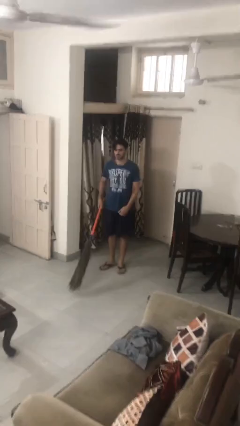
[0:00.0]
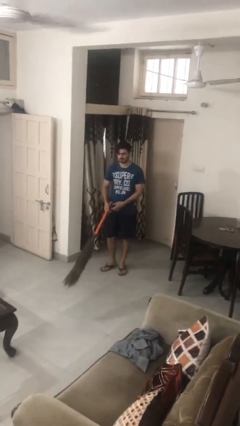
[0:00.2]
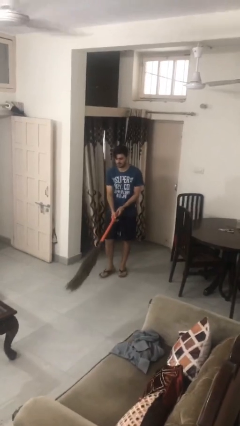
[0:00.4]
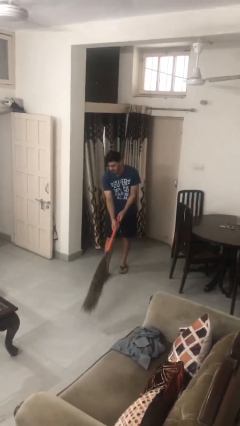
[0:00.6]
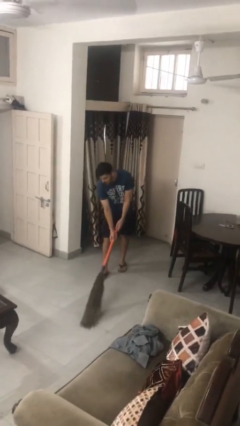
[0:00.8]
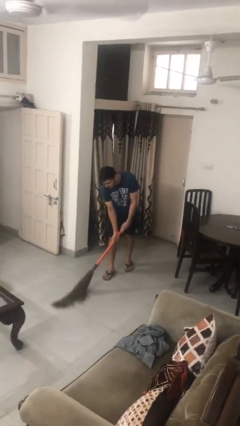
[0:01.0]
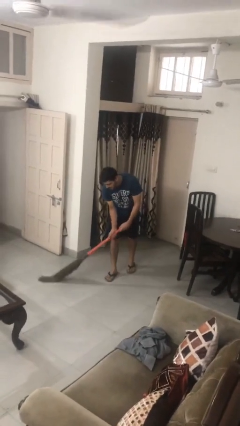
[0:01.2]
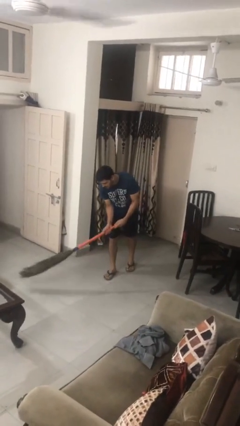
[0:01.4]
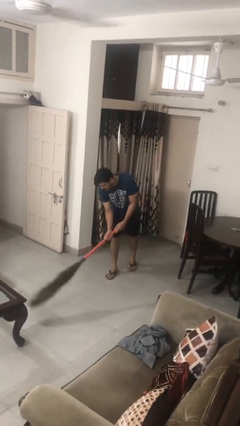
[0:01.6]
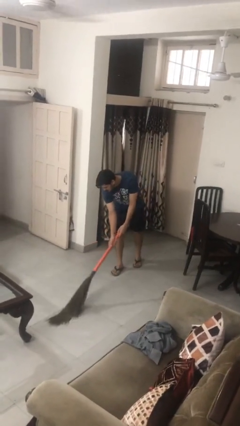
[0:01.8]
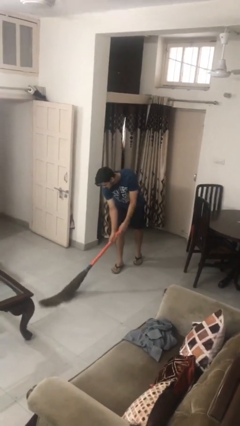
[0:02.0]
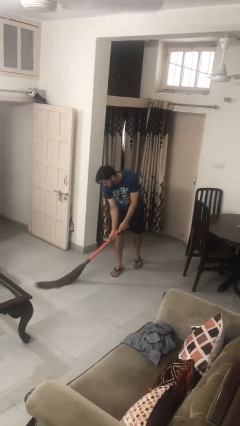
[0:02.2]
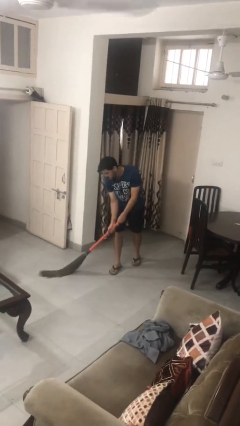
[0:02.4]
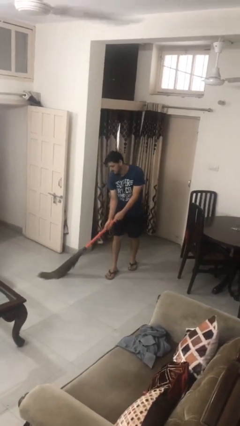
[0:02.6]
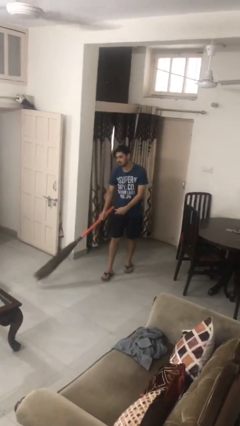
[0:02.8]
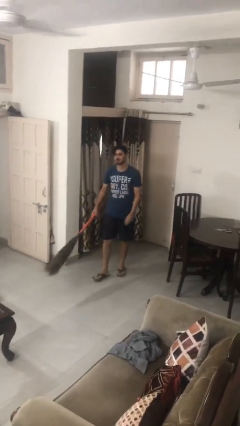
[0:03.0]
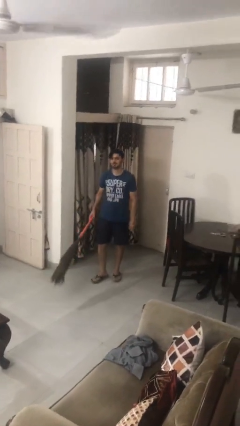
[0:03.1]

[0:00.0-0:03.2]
person sweeps floor

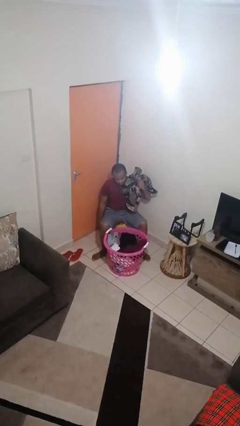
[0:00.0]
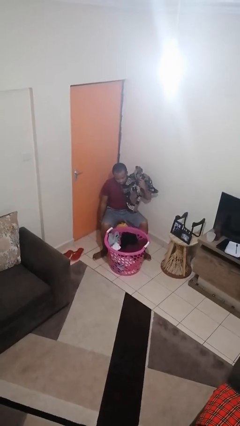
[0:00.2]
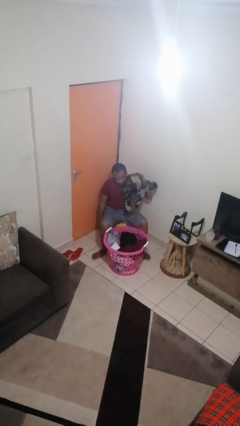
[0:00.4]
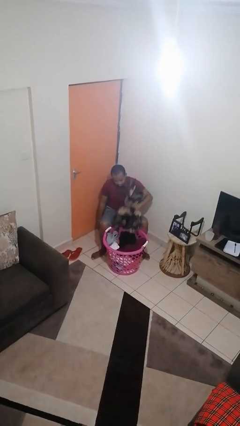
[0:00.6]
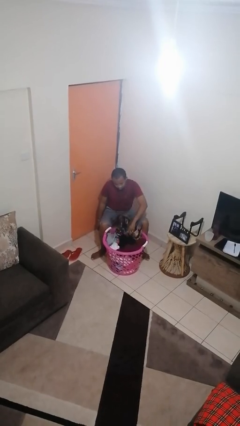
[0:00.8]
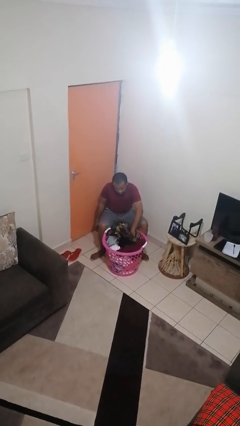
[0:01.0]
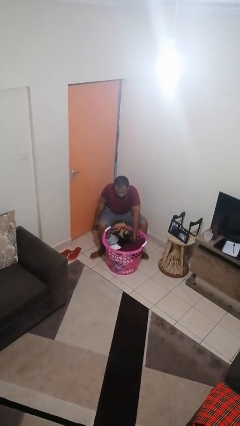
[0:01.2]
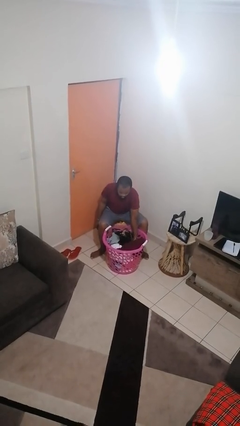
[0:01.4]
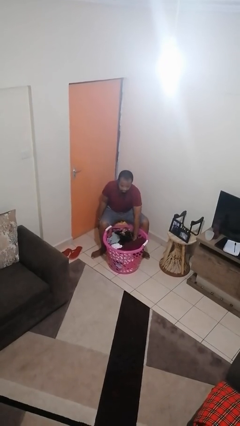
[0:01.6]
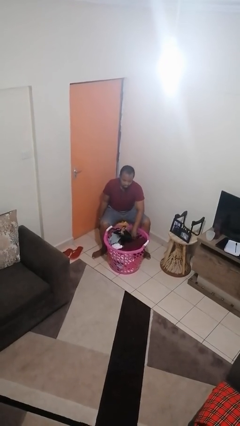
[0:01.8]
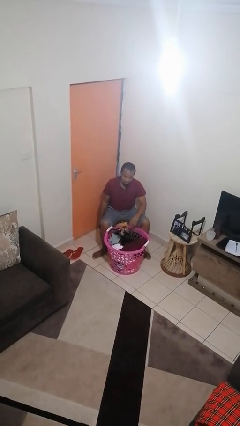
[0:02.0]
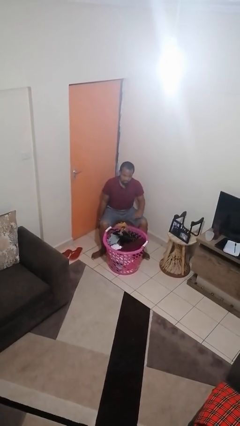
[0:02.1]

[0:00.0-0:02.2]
person puts object into basket

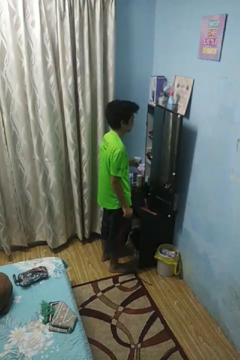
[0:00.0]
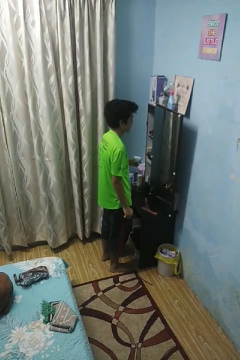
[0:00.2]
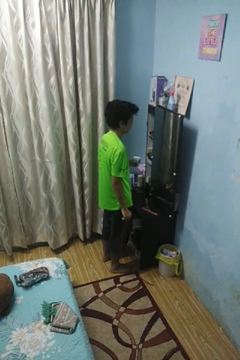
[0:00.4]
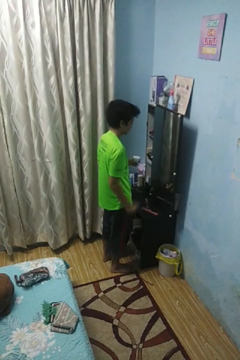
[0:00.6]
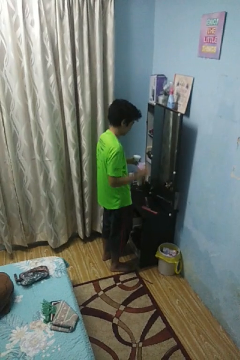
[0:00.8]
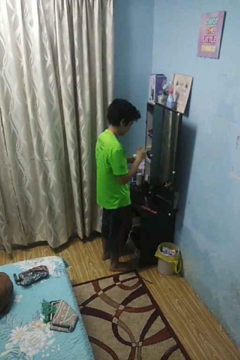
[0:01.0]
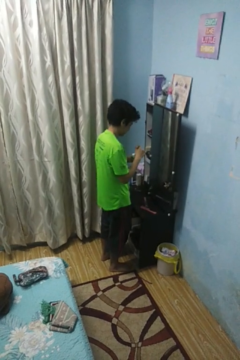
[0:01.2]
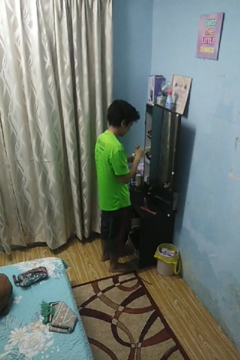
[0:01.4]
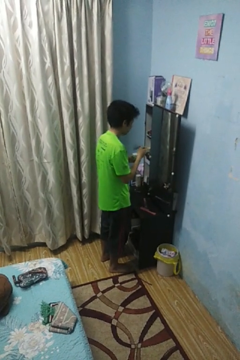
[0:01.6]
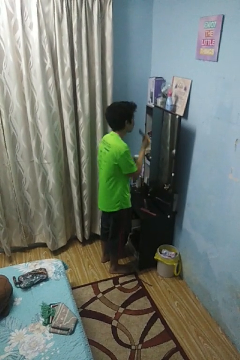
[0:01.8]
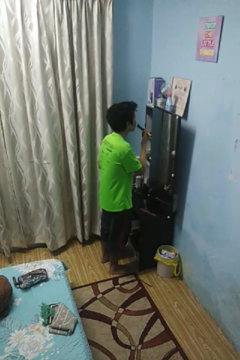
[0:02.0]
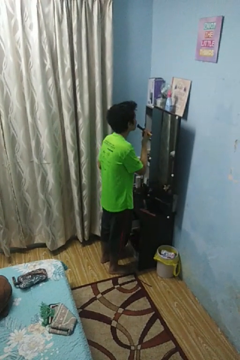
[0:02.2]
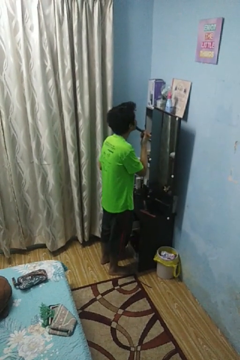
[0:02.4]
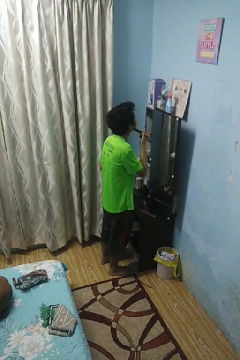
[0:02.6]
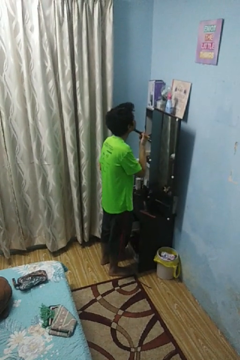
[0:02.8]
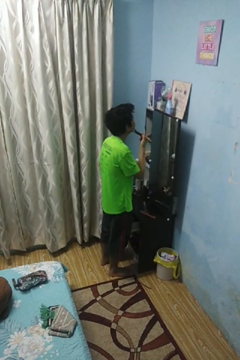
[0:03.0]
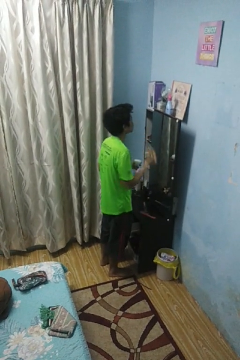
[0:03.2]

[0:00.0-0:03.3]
person applies foundation makeup

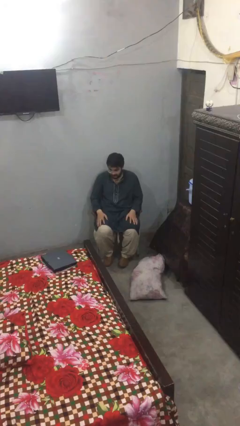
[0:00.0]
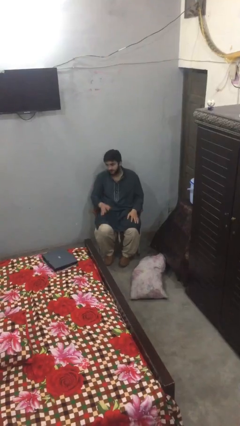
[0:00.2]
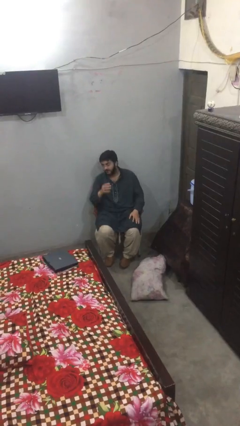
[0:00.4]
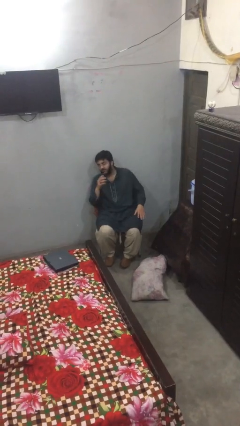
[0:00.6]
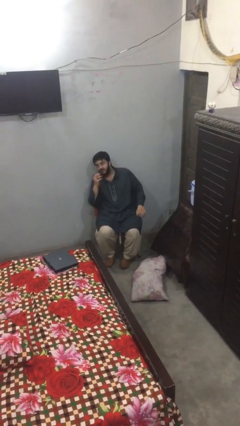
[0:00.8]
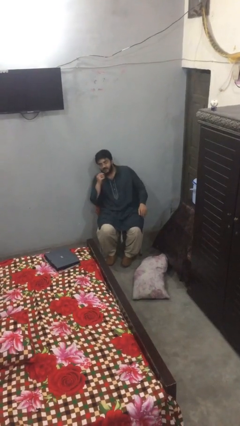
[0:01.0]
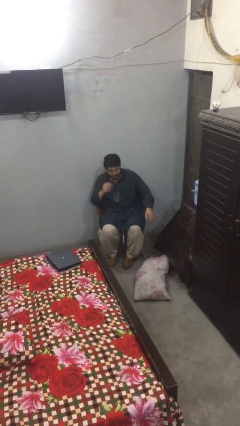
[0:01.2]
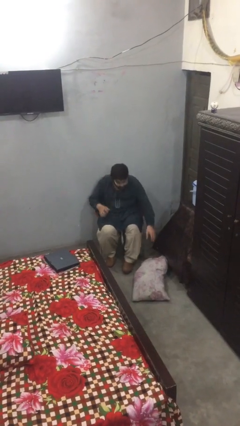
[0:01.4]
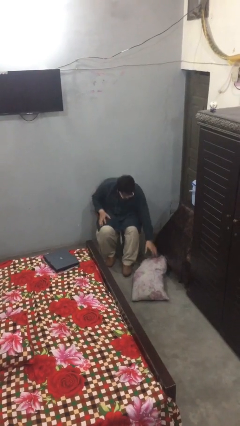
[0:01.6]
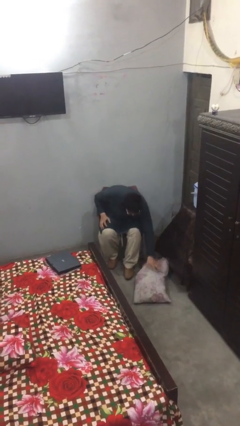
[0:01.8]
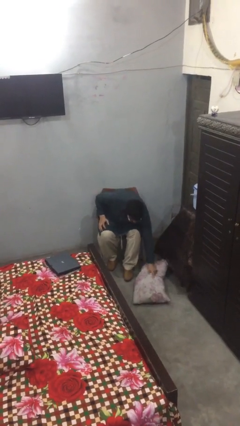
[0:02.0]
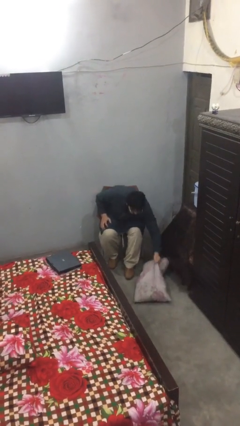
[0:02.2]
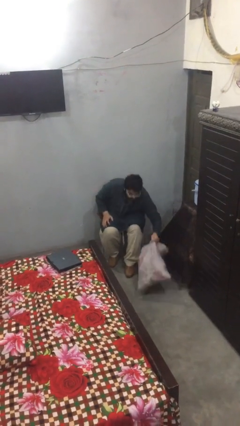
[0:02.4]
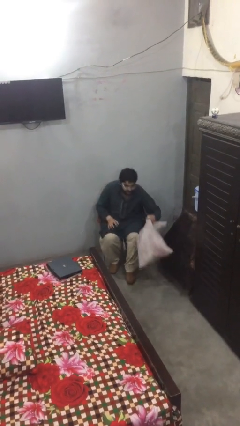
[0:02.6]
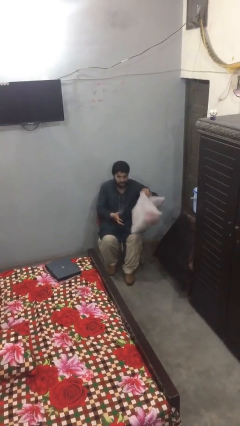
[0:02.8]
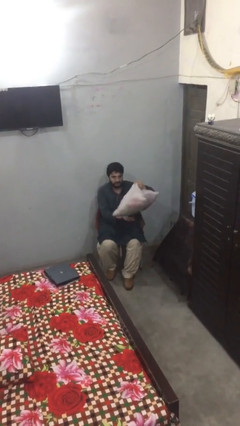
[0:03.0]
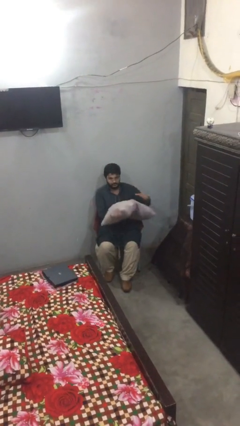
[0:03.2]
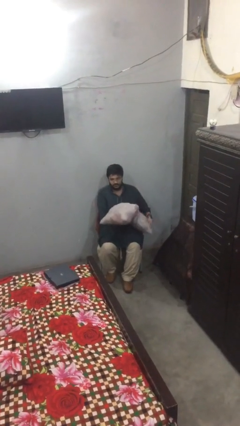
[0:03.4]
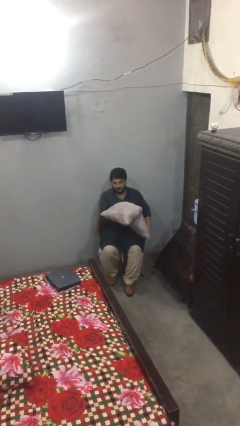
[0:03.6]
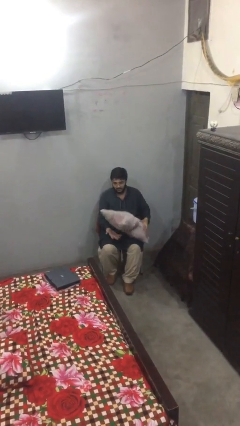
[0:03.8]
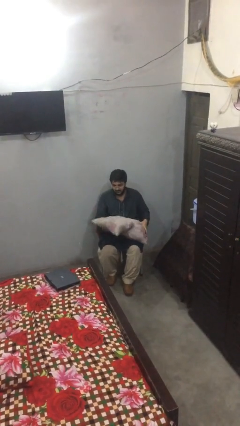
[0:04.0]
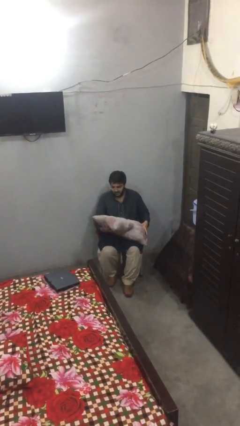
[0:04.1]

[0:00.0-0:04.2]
person picks up object from floor

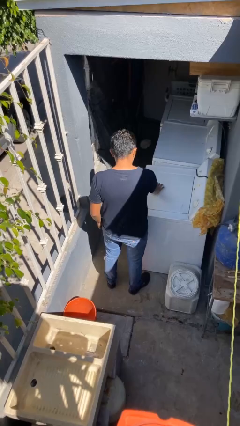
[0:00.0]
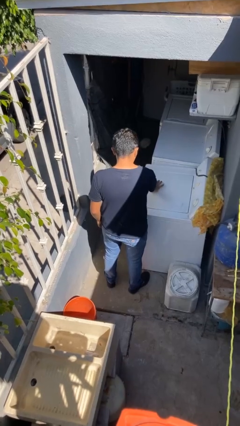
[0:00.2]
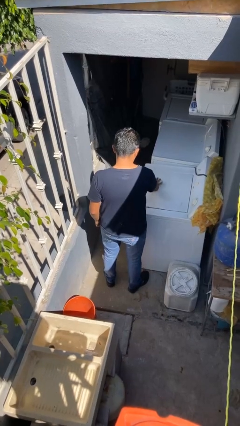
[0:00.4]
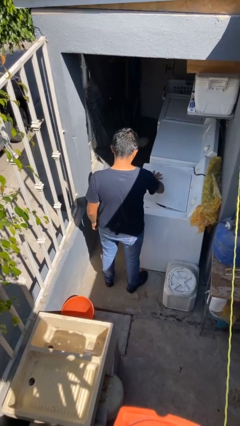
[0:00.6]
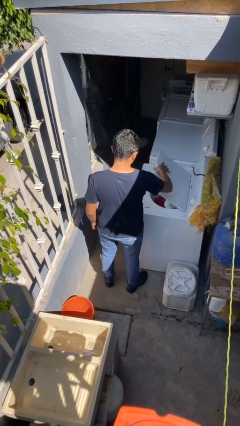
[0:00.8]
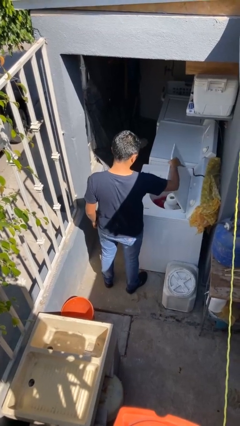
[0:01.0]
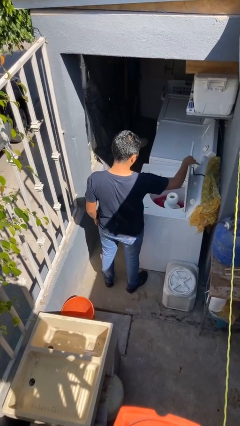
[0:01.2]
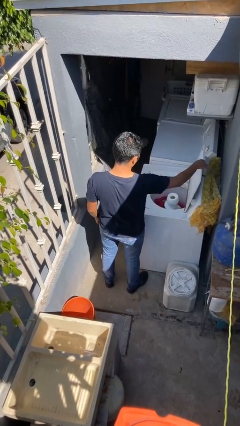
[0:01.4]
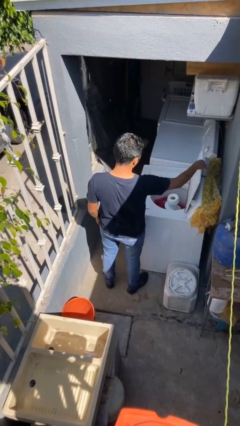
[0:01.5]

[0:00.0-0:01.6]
person opens clothes washer

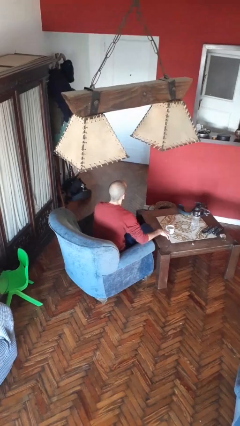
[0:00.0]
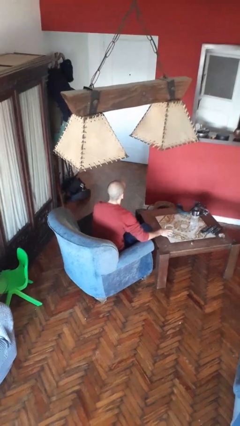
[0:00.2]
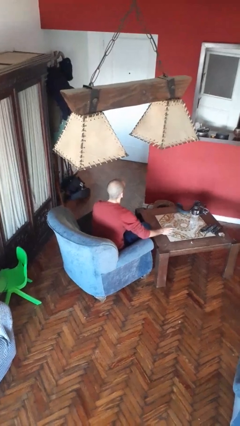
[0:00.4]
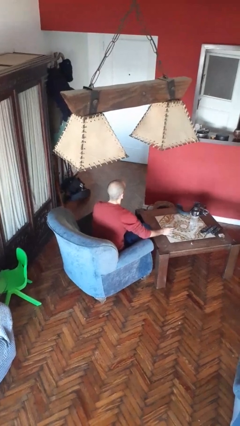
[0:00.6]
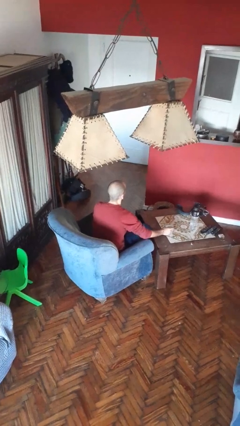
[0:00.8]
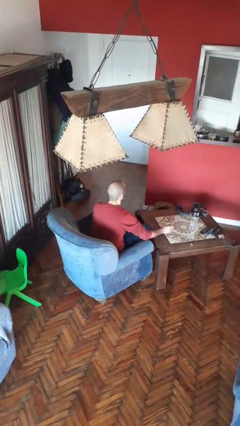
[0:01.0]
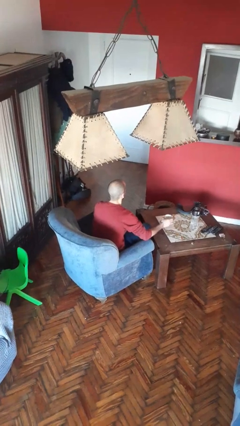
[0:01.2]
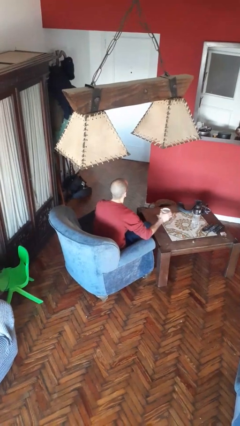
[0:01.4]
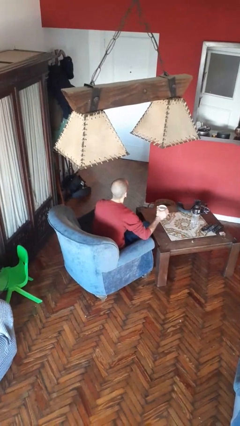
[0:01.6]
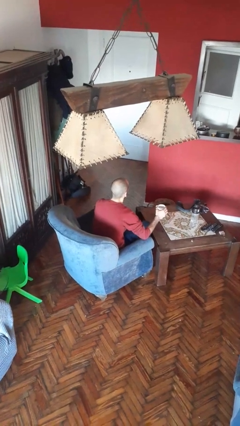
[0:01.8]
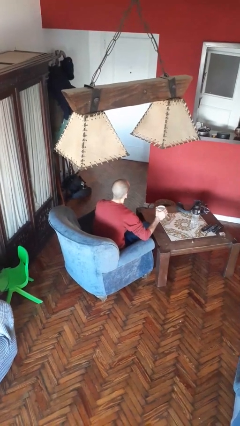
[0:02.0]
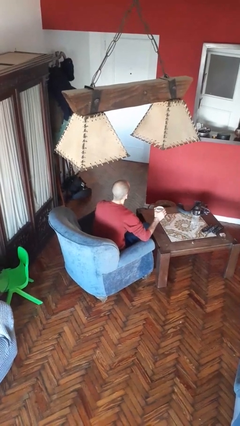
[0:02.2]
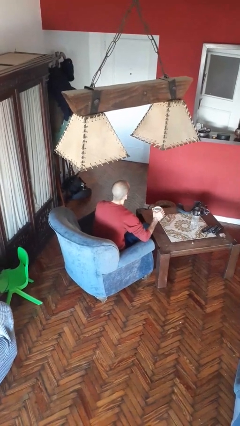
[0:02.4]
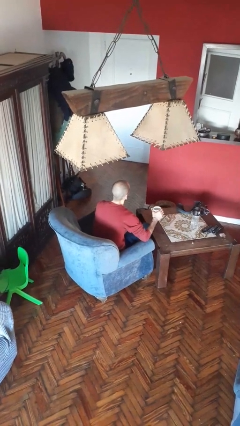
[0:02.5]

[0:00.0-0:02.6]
person picks up object from table

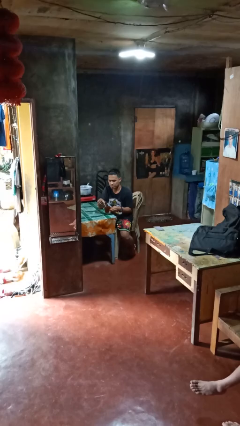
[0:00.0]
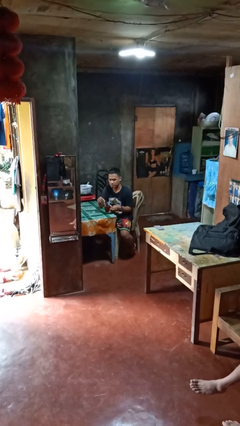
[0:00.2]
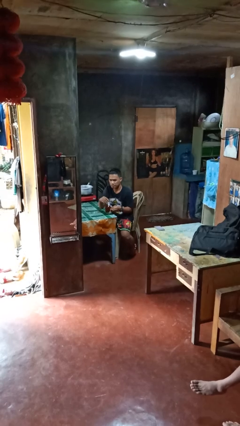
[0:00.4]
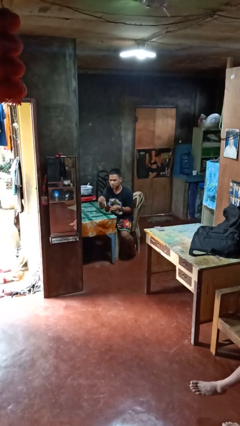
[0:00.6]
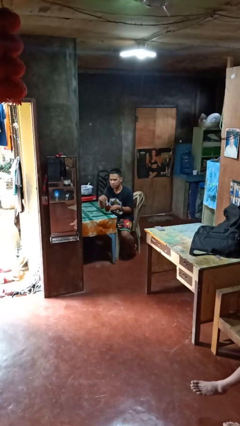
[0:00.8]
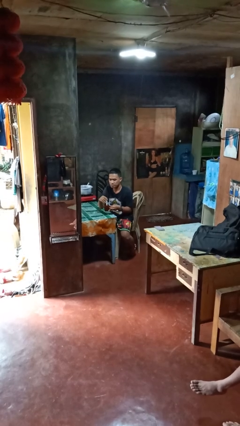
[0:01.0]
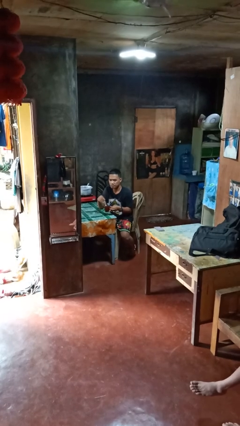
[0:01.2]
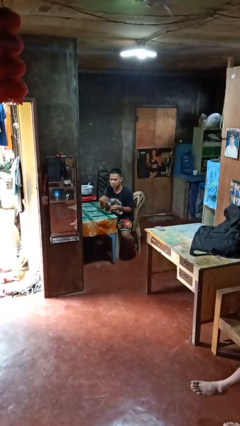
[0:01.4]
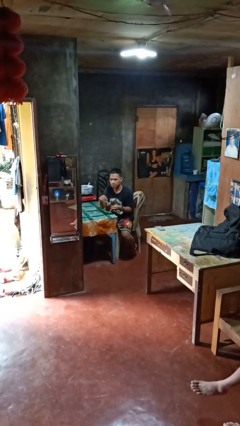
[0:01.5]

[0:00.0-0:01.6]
person stirs mug
